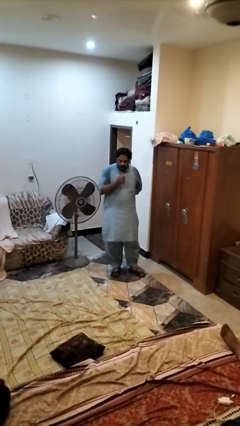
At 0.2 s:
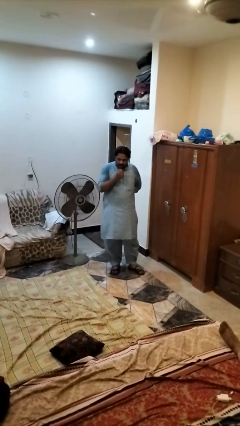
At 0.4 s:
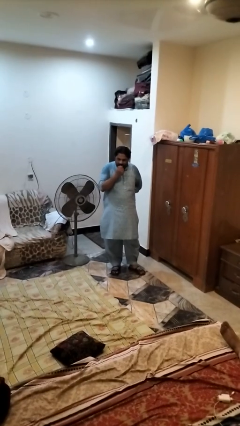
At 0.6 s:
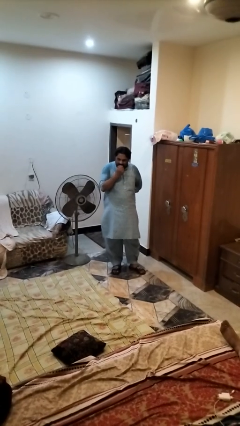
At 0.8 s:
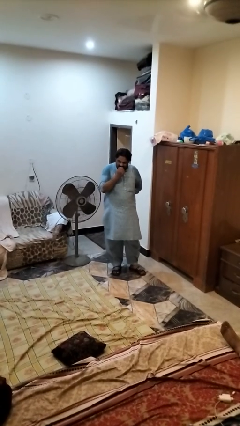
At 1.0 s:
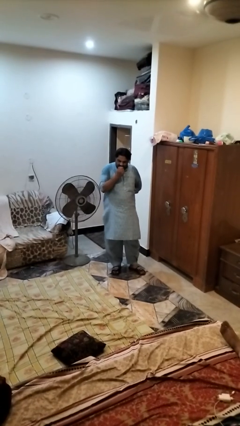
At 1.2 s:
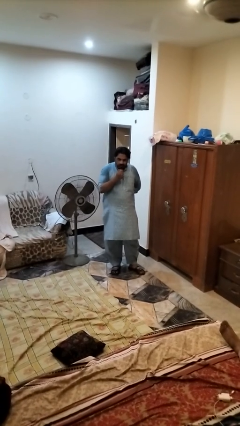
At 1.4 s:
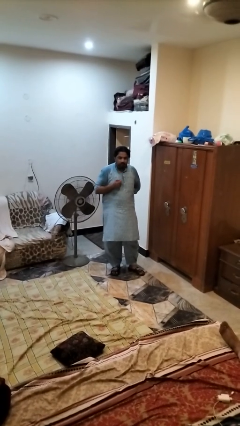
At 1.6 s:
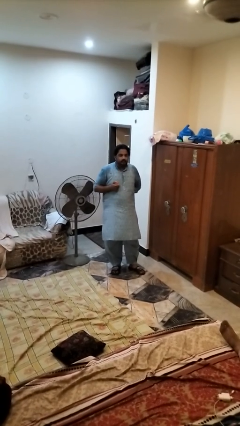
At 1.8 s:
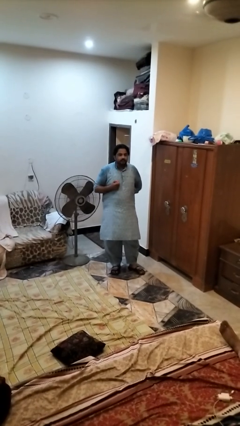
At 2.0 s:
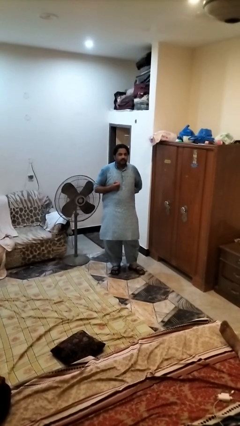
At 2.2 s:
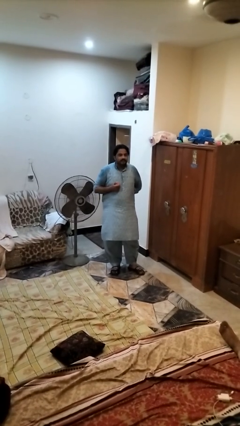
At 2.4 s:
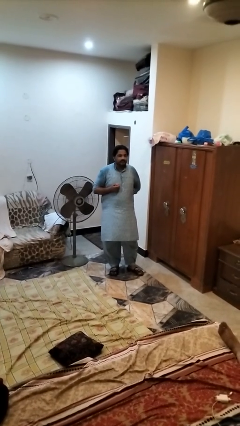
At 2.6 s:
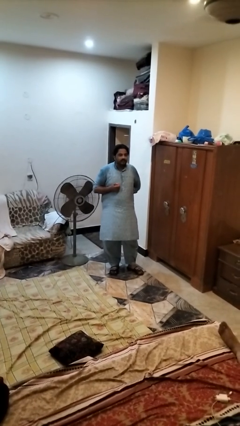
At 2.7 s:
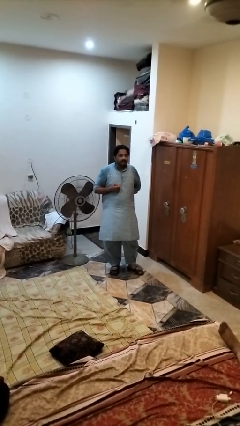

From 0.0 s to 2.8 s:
person eats apple

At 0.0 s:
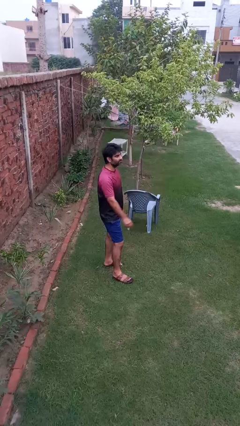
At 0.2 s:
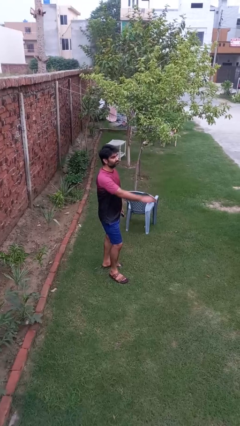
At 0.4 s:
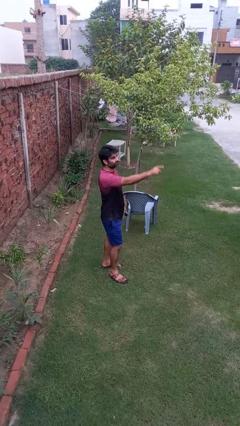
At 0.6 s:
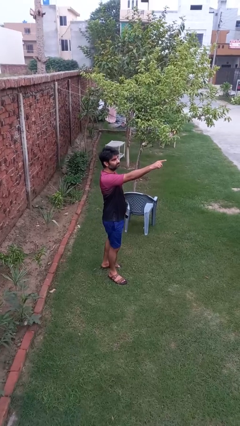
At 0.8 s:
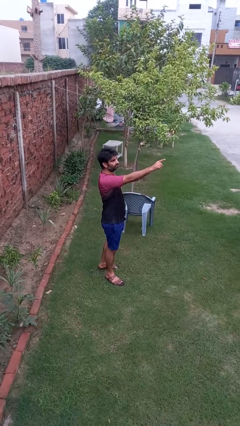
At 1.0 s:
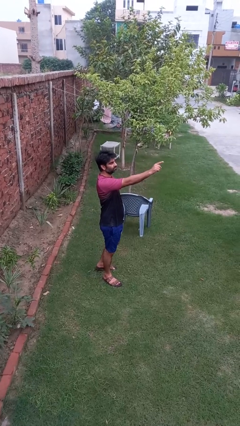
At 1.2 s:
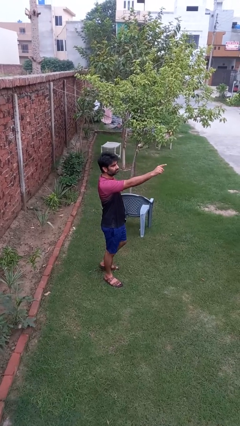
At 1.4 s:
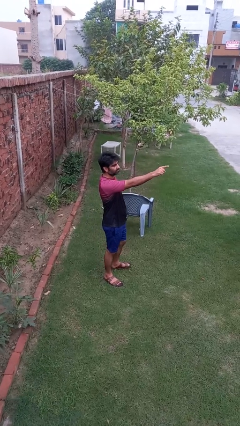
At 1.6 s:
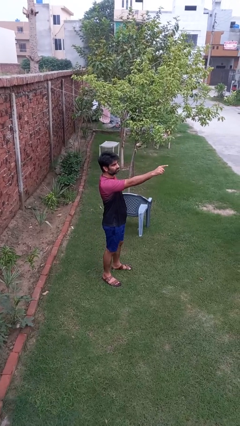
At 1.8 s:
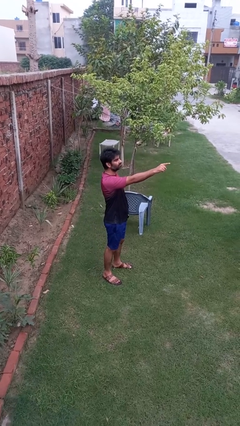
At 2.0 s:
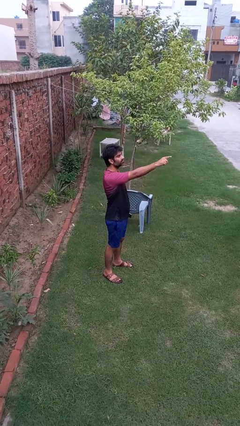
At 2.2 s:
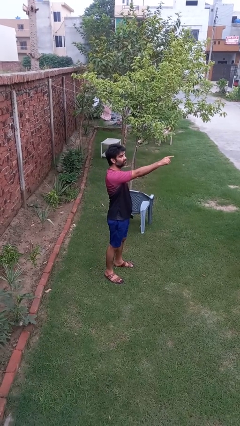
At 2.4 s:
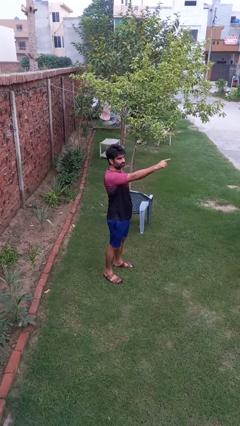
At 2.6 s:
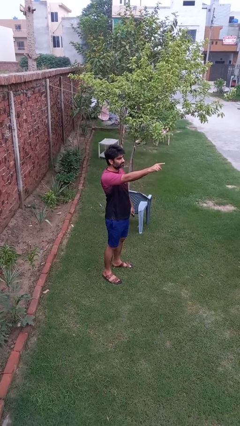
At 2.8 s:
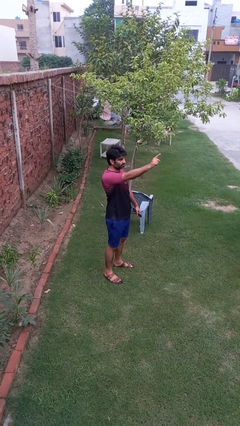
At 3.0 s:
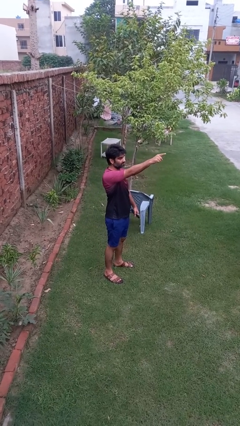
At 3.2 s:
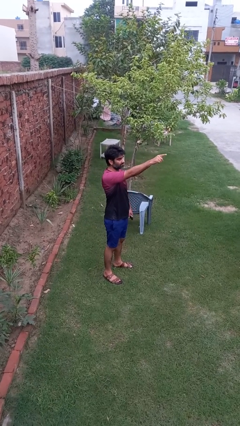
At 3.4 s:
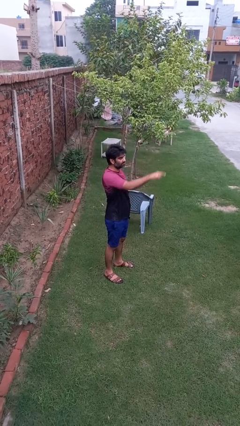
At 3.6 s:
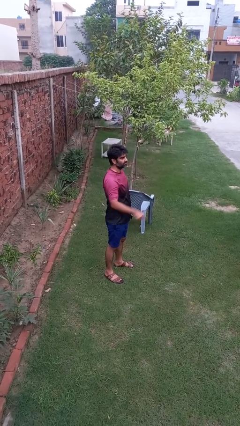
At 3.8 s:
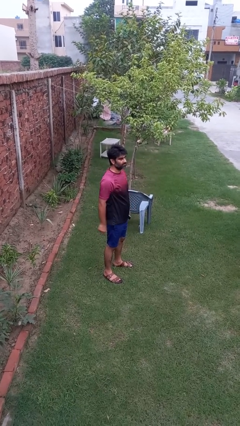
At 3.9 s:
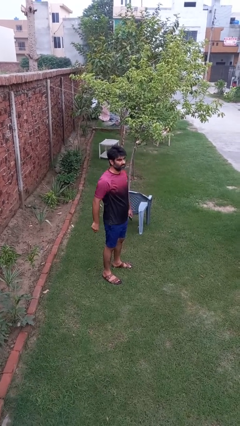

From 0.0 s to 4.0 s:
person points at person

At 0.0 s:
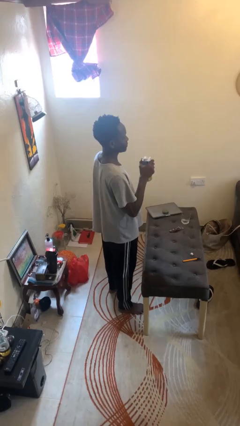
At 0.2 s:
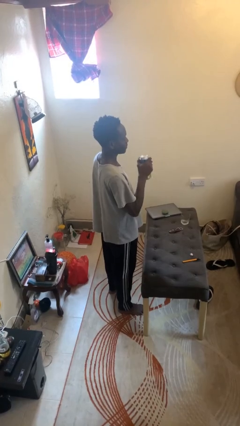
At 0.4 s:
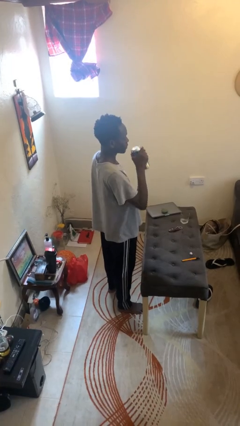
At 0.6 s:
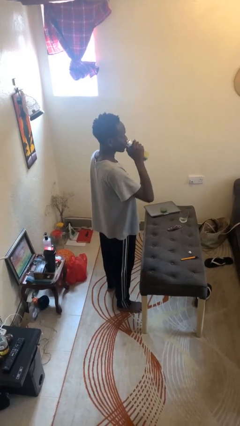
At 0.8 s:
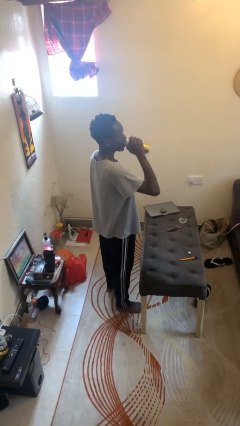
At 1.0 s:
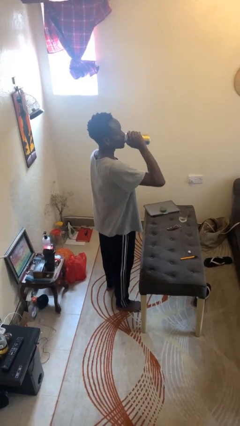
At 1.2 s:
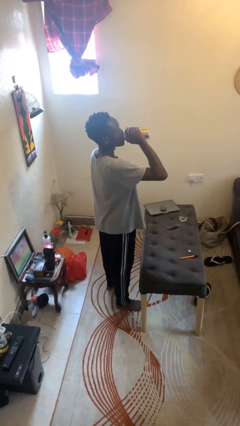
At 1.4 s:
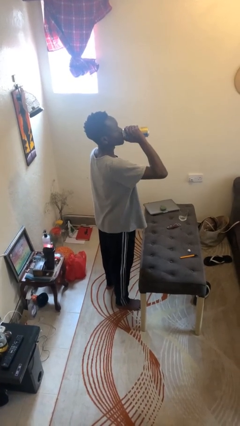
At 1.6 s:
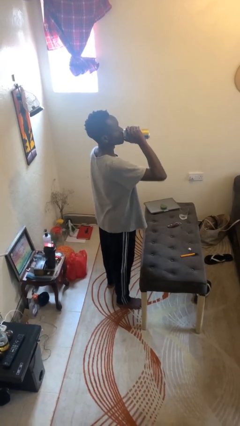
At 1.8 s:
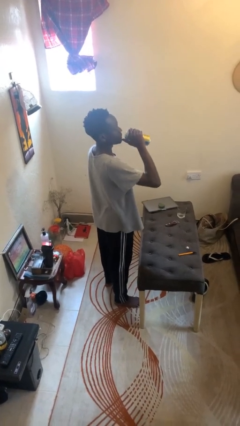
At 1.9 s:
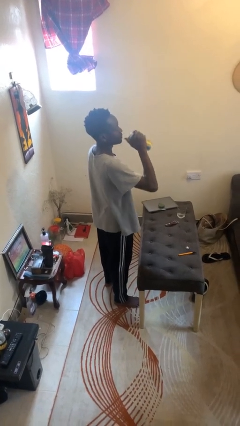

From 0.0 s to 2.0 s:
person drinks from beverage can

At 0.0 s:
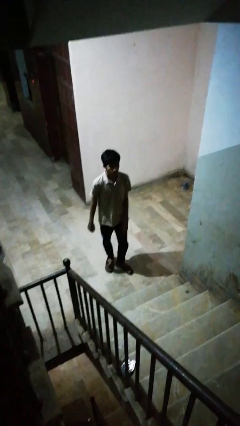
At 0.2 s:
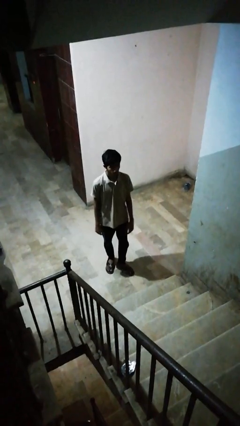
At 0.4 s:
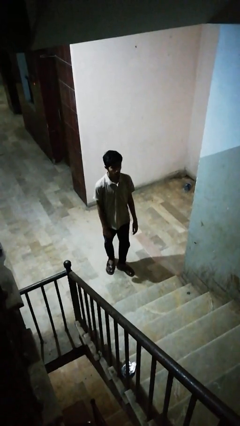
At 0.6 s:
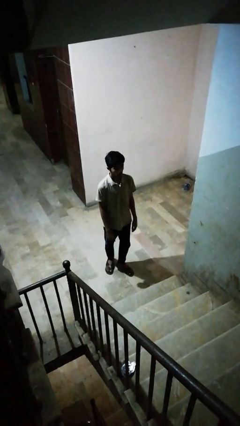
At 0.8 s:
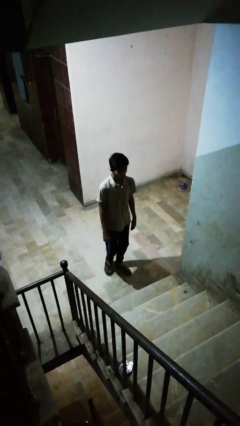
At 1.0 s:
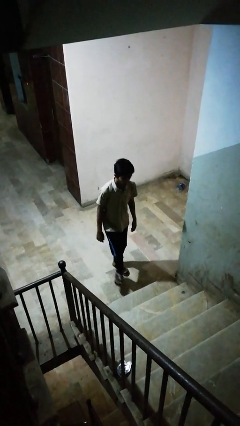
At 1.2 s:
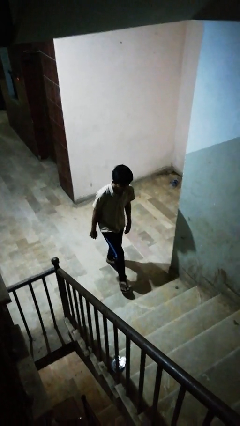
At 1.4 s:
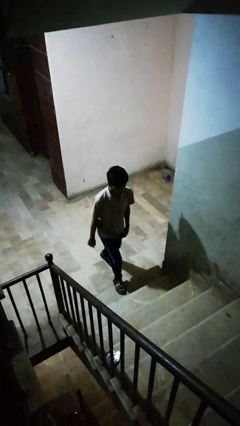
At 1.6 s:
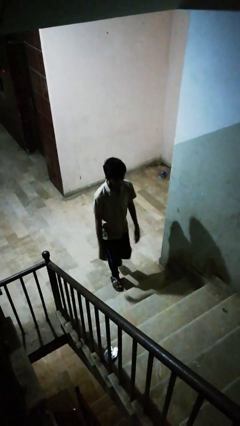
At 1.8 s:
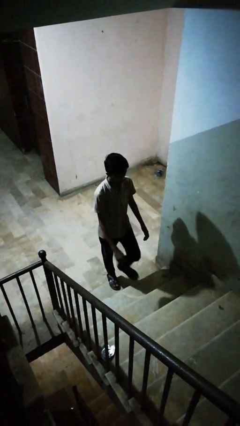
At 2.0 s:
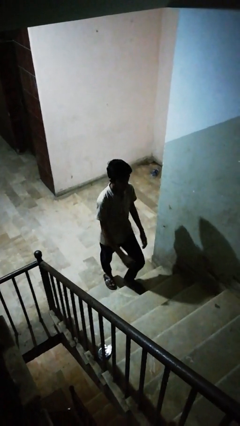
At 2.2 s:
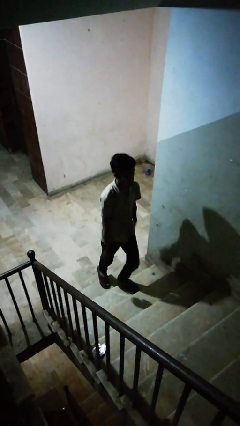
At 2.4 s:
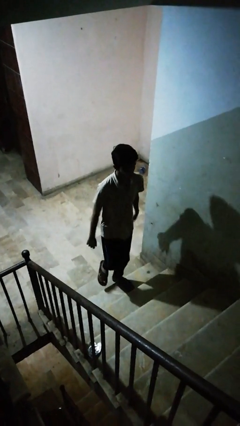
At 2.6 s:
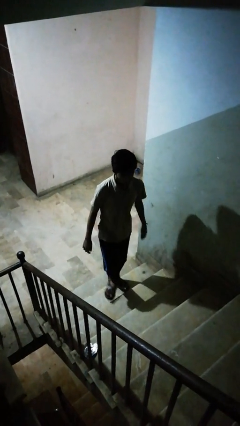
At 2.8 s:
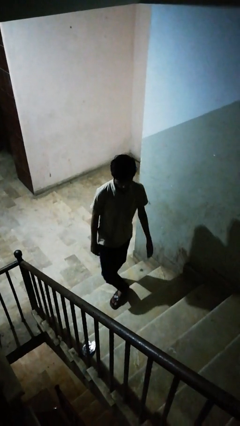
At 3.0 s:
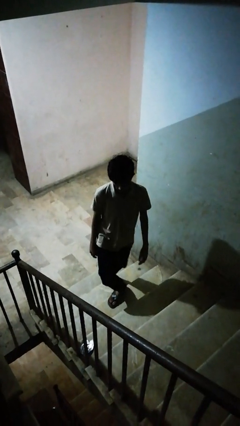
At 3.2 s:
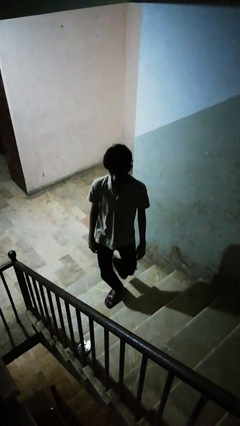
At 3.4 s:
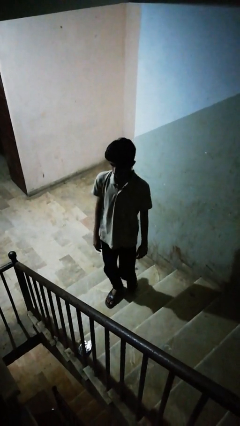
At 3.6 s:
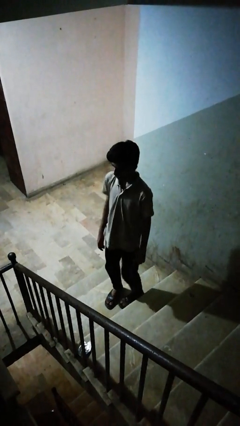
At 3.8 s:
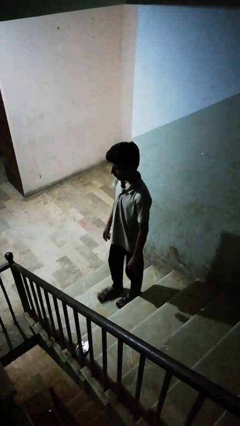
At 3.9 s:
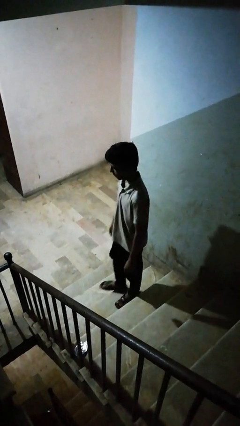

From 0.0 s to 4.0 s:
person climbs up stairs

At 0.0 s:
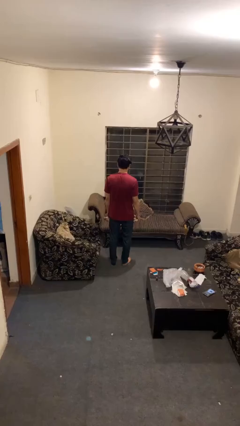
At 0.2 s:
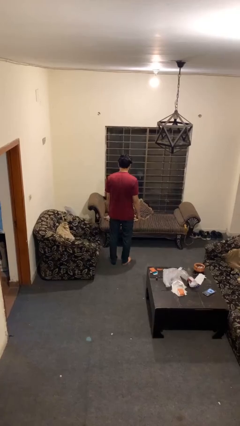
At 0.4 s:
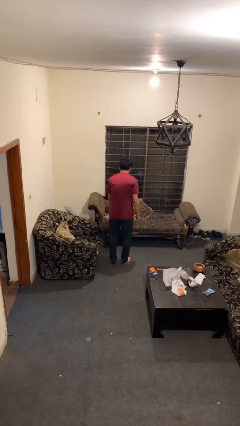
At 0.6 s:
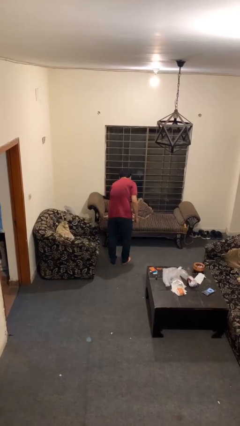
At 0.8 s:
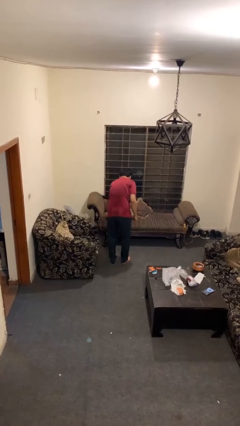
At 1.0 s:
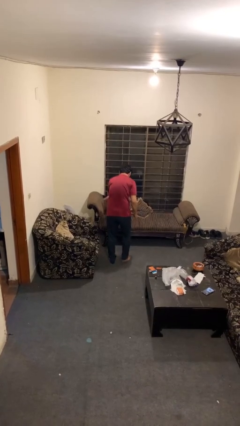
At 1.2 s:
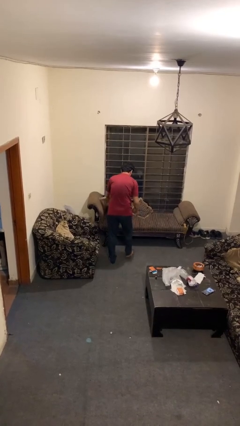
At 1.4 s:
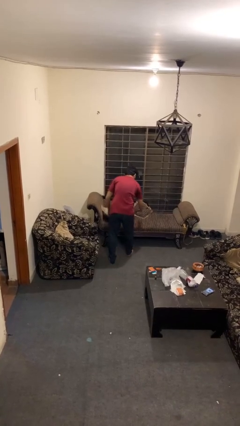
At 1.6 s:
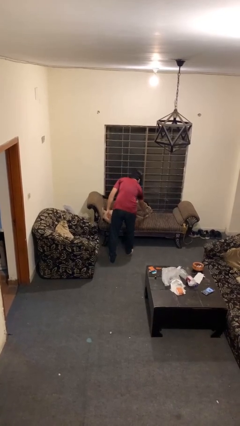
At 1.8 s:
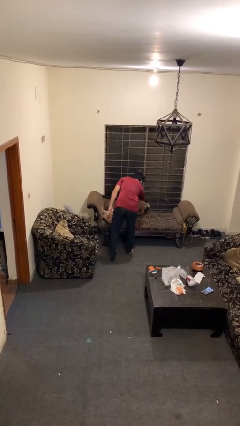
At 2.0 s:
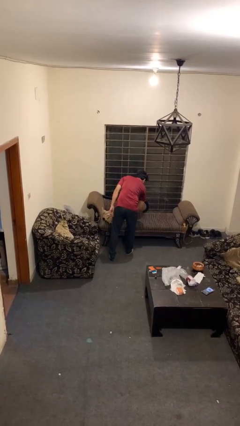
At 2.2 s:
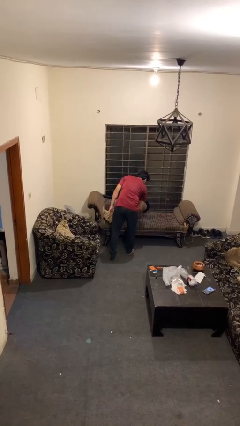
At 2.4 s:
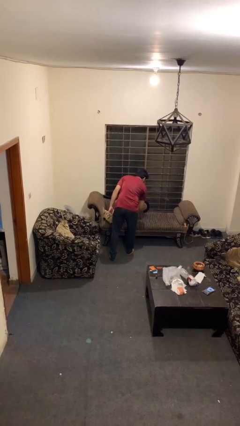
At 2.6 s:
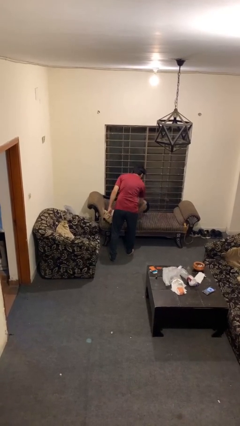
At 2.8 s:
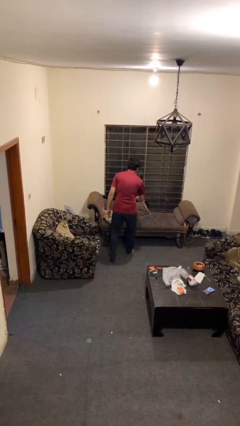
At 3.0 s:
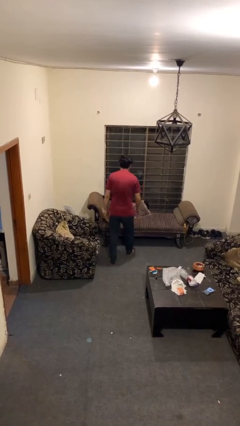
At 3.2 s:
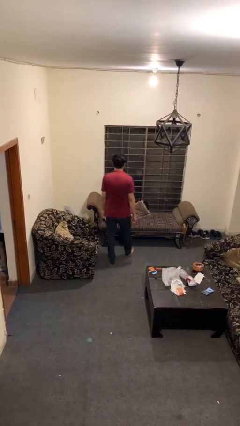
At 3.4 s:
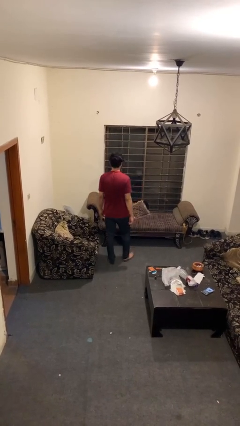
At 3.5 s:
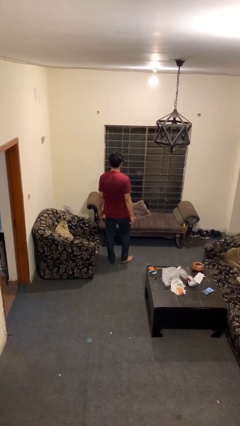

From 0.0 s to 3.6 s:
person searches in couch

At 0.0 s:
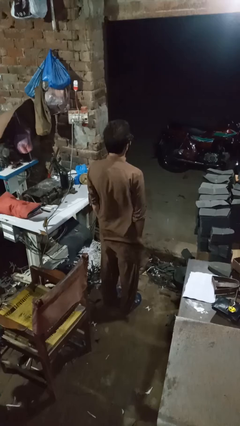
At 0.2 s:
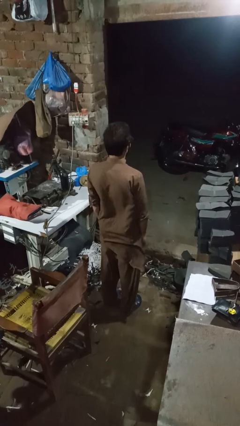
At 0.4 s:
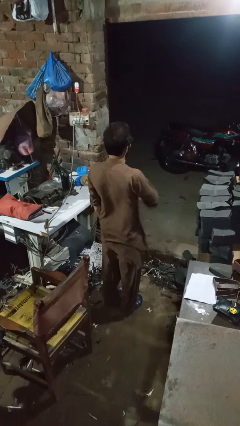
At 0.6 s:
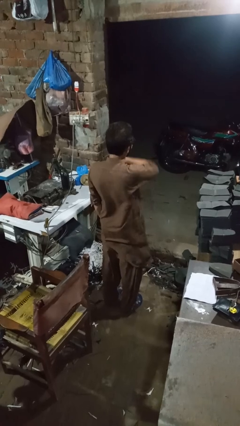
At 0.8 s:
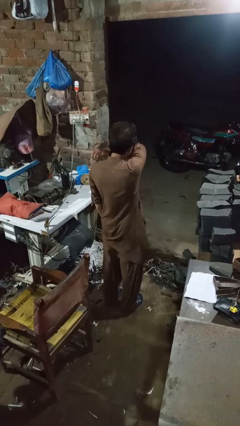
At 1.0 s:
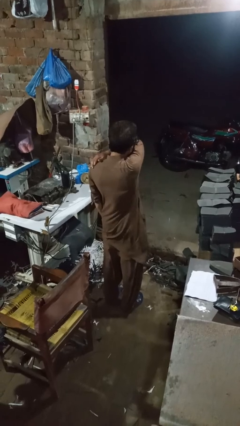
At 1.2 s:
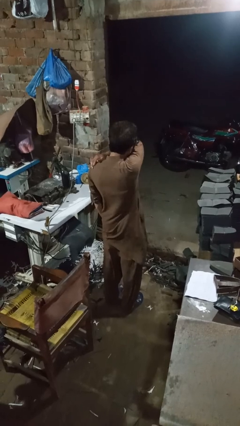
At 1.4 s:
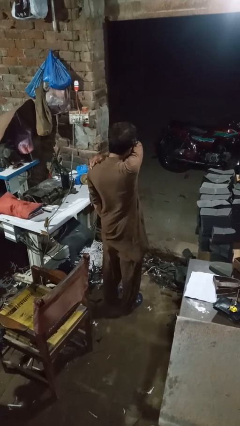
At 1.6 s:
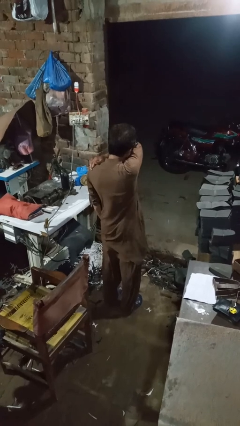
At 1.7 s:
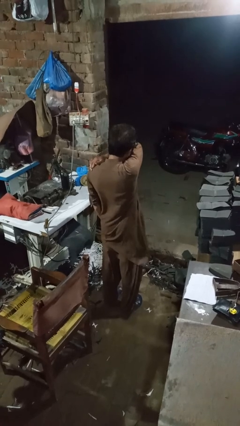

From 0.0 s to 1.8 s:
person sneezes into arm
